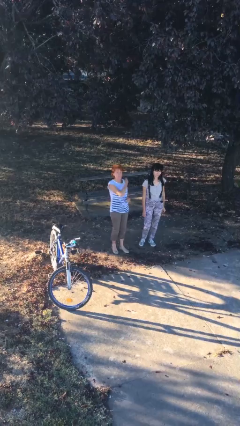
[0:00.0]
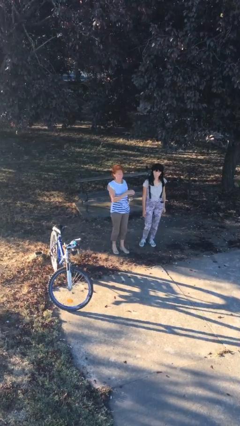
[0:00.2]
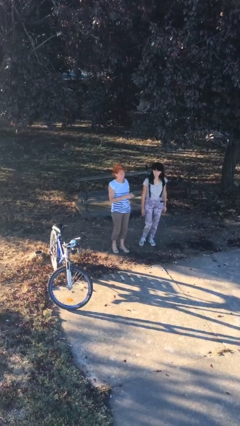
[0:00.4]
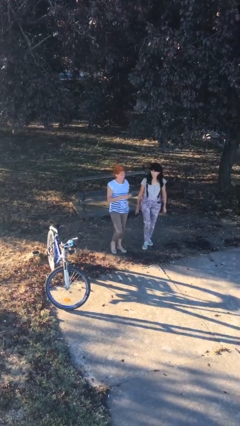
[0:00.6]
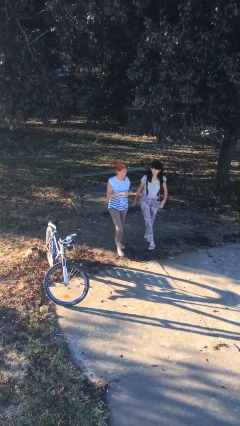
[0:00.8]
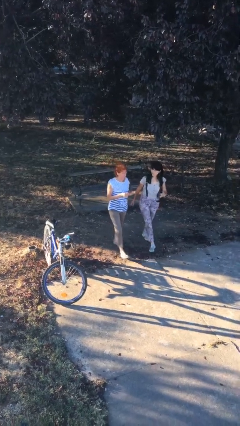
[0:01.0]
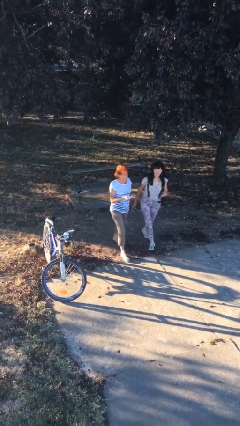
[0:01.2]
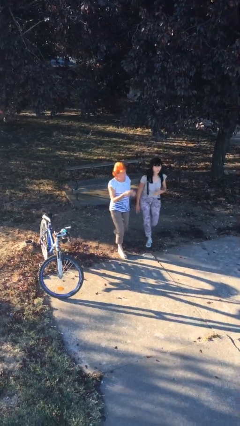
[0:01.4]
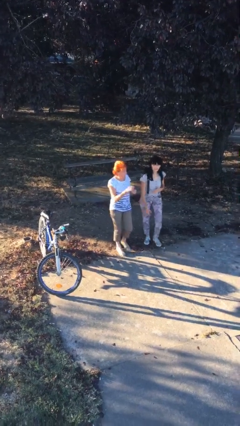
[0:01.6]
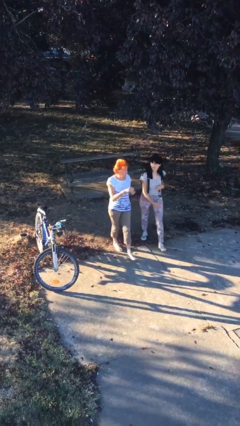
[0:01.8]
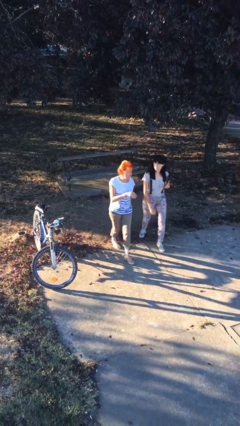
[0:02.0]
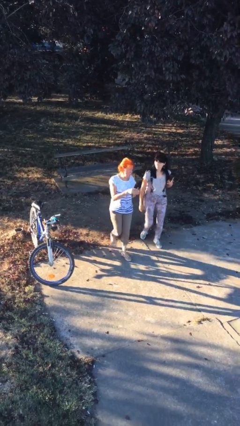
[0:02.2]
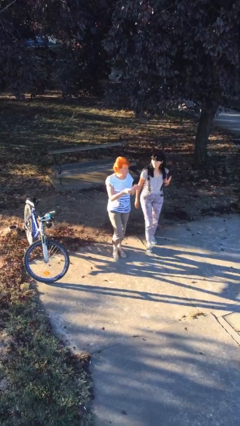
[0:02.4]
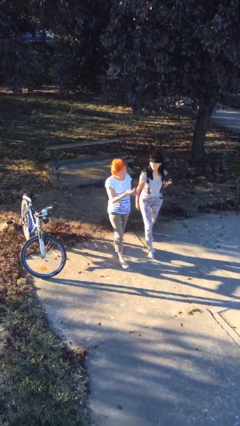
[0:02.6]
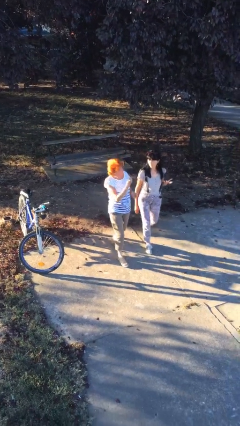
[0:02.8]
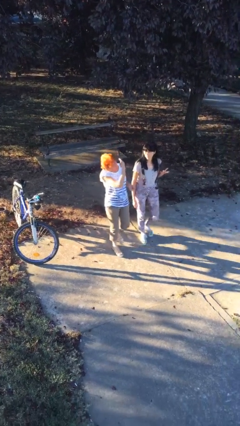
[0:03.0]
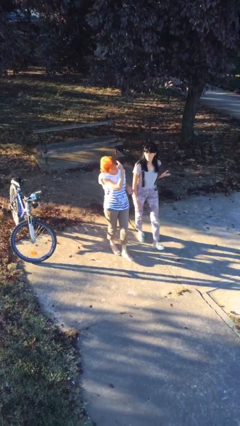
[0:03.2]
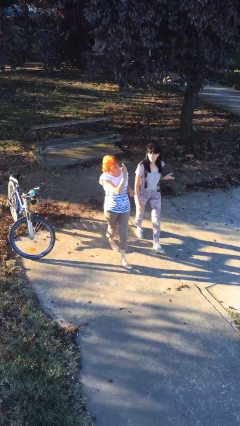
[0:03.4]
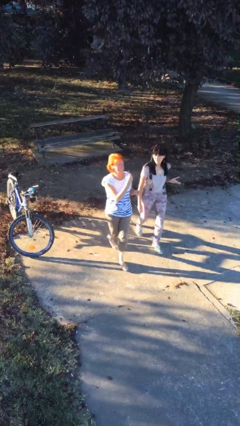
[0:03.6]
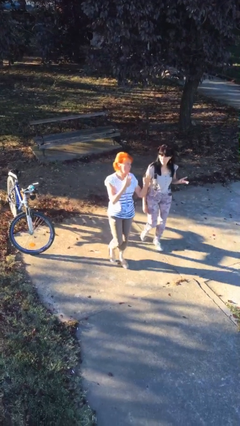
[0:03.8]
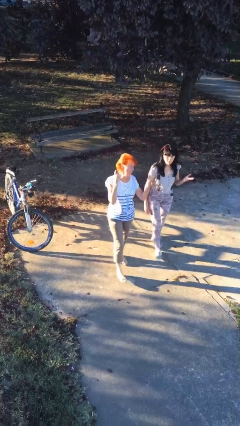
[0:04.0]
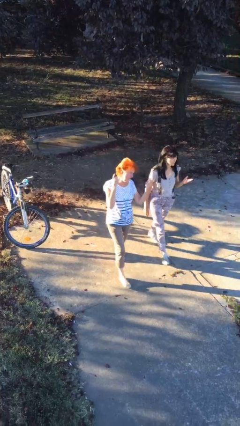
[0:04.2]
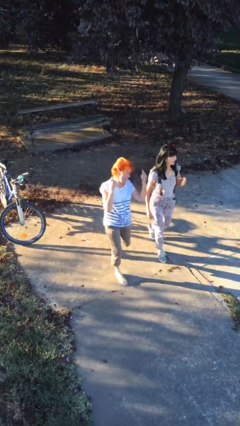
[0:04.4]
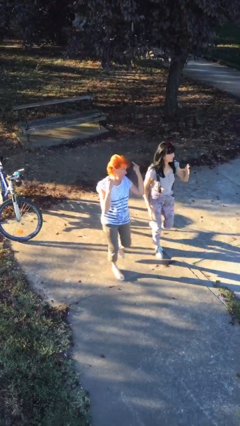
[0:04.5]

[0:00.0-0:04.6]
person talks to person

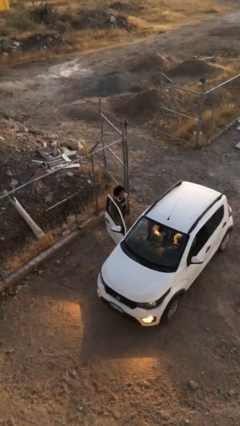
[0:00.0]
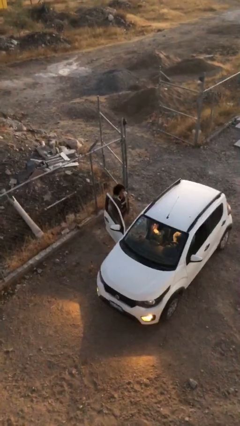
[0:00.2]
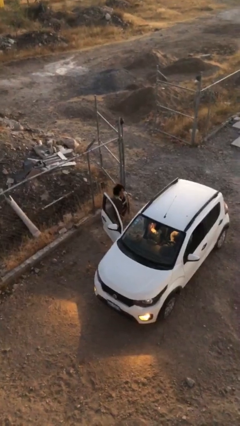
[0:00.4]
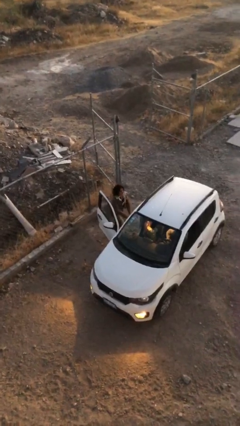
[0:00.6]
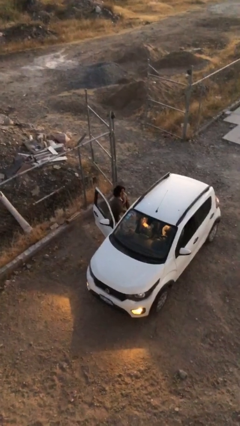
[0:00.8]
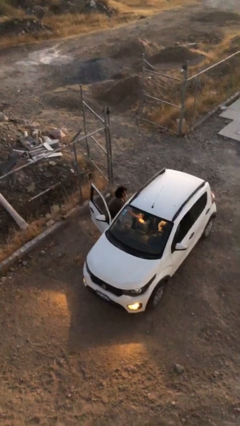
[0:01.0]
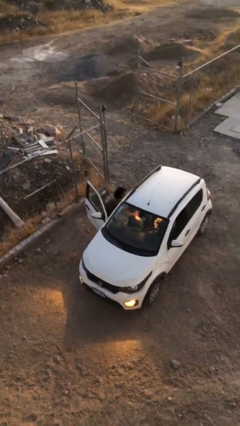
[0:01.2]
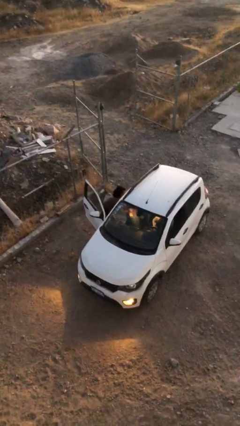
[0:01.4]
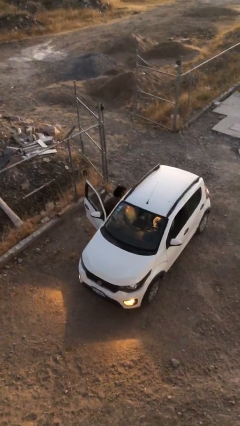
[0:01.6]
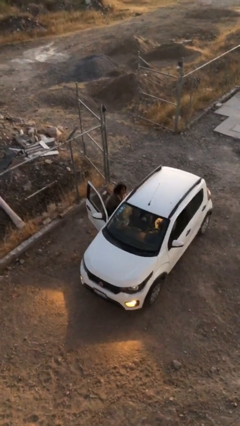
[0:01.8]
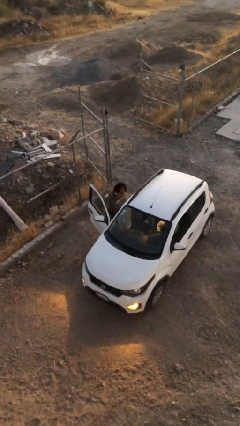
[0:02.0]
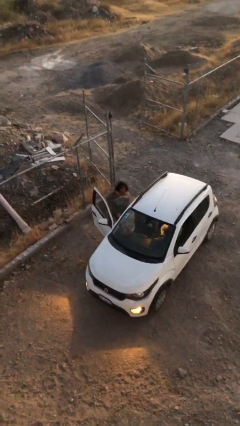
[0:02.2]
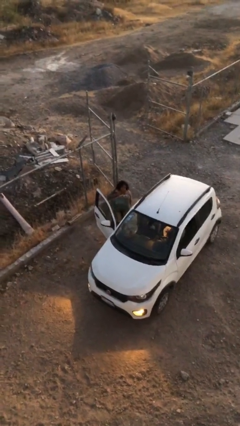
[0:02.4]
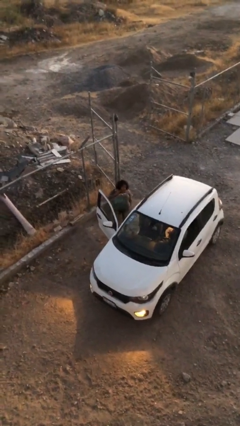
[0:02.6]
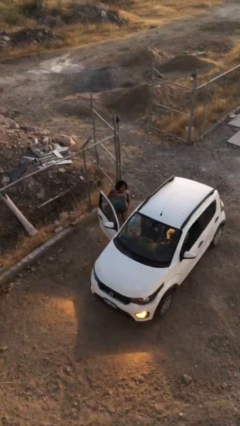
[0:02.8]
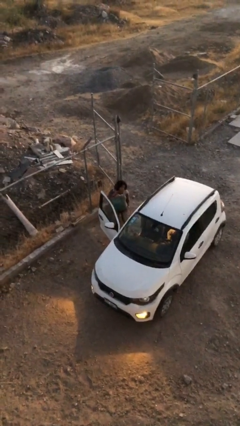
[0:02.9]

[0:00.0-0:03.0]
person unloads car

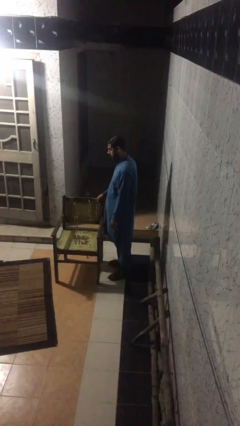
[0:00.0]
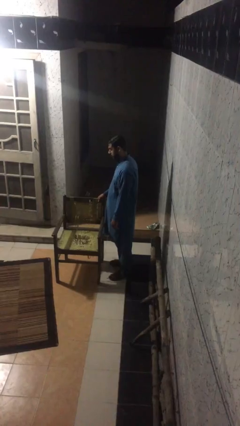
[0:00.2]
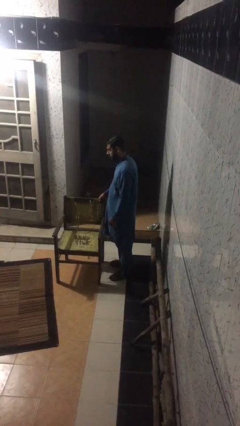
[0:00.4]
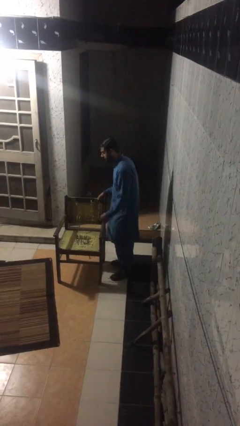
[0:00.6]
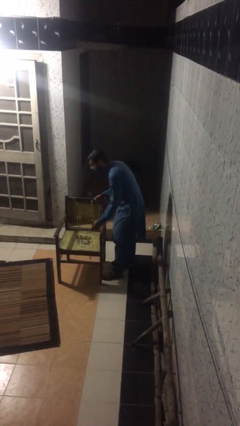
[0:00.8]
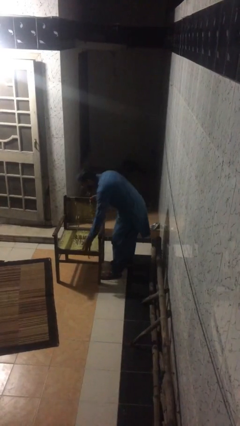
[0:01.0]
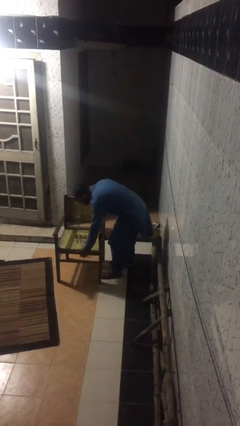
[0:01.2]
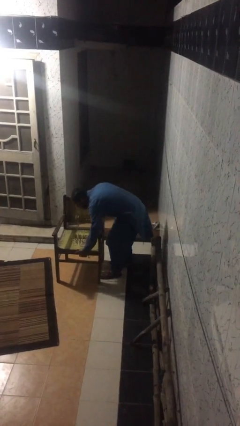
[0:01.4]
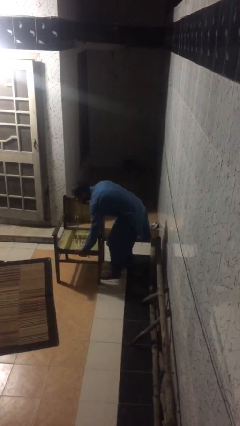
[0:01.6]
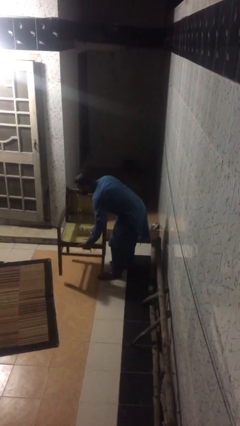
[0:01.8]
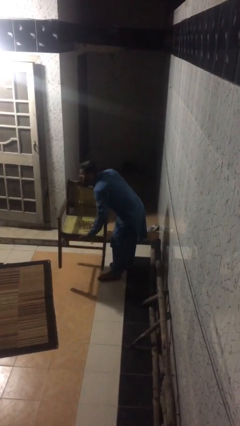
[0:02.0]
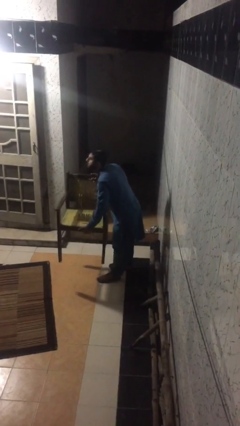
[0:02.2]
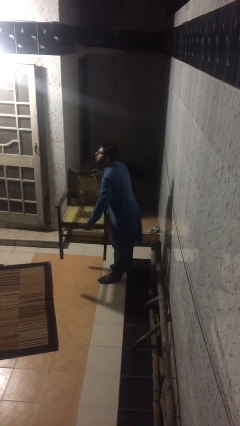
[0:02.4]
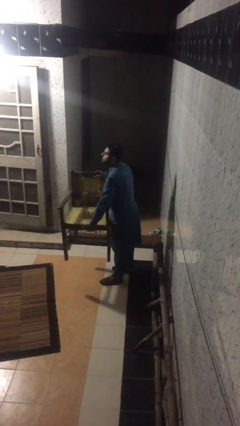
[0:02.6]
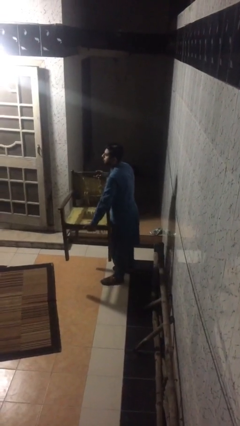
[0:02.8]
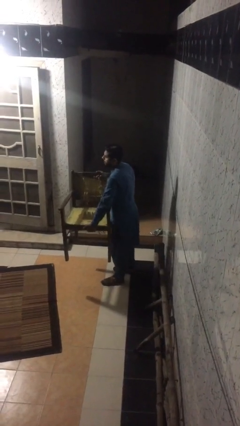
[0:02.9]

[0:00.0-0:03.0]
person picks up object from floor

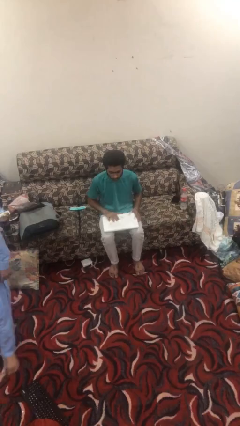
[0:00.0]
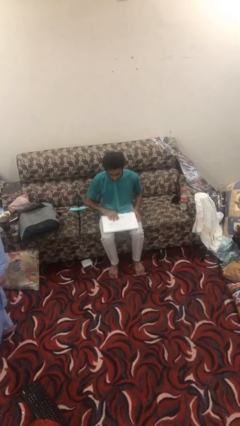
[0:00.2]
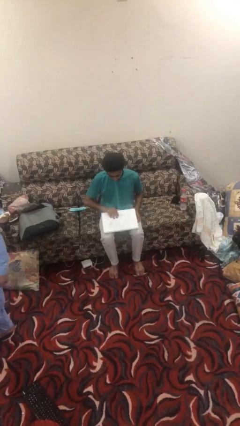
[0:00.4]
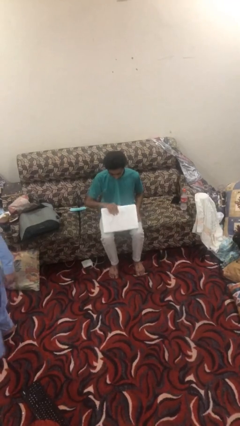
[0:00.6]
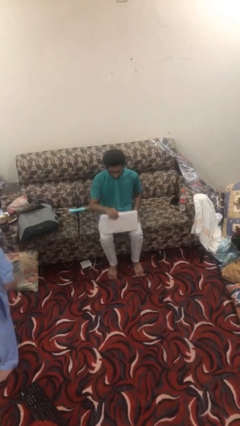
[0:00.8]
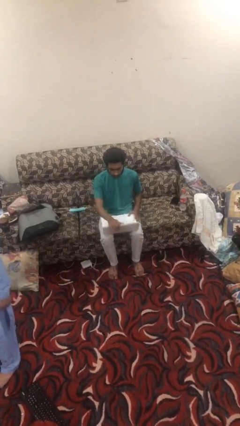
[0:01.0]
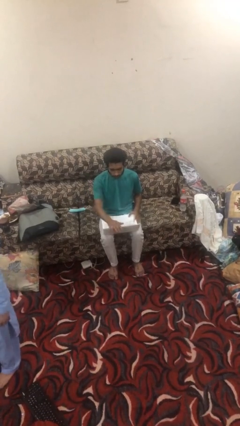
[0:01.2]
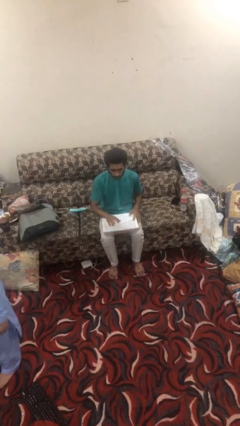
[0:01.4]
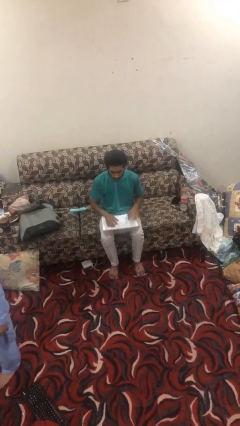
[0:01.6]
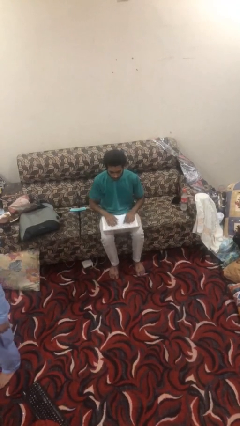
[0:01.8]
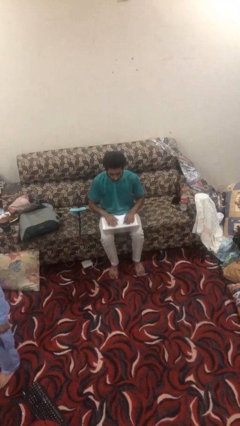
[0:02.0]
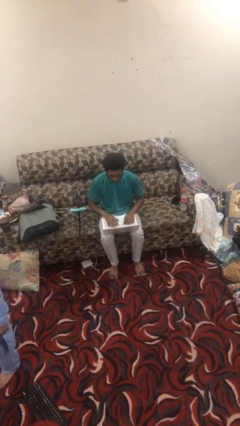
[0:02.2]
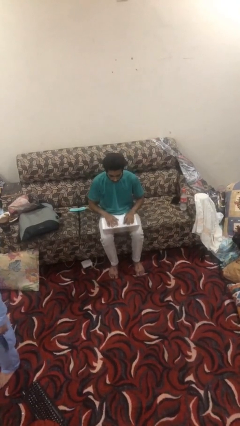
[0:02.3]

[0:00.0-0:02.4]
person opens laptop

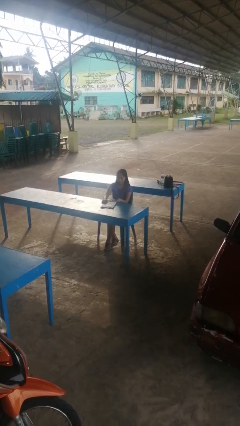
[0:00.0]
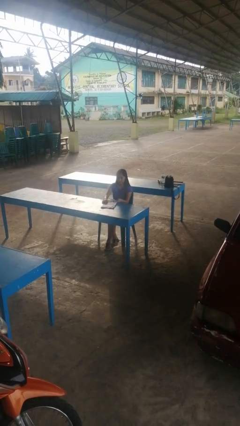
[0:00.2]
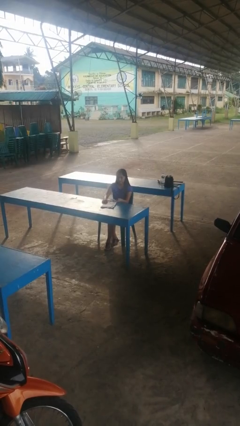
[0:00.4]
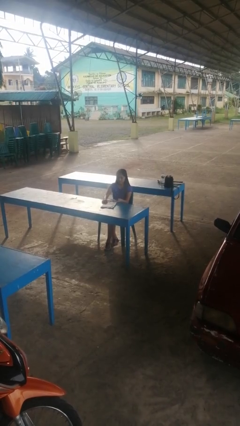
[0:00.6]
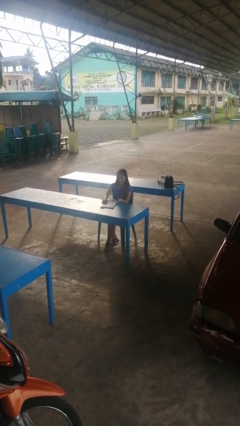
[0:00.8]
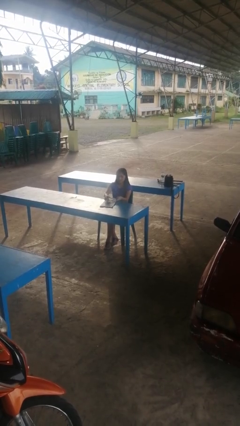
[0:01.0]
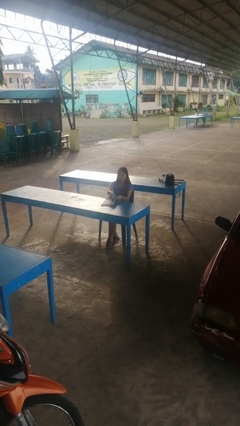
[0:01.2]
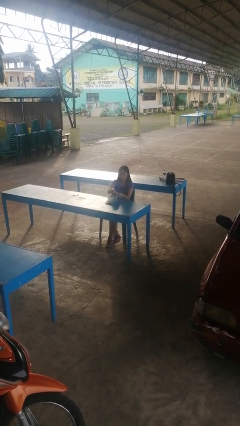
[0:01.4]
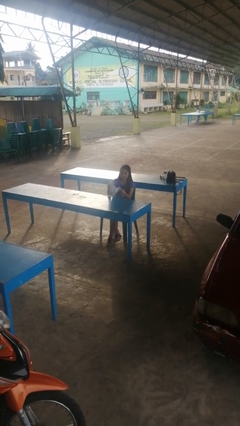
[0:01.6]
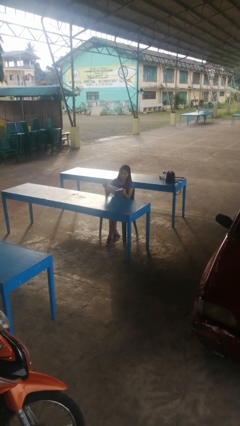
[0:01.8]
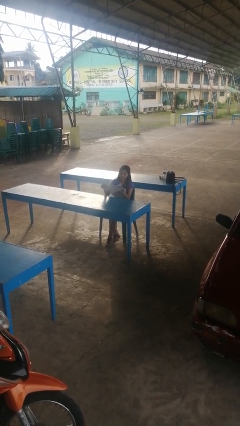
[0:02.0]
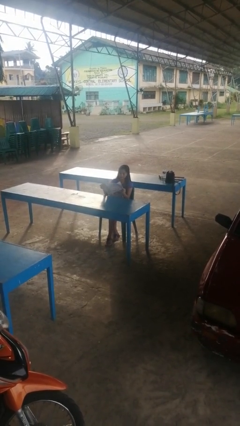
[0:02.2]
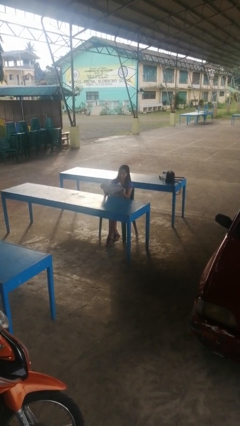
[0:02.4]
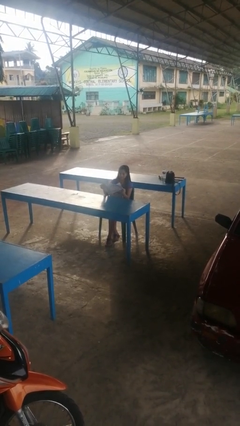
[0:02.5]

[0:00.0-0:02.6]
person reads newspaper

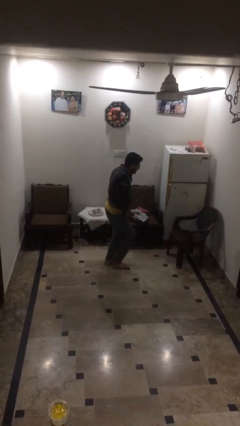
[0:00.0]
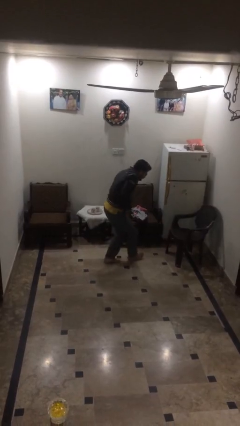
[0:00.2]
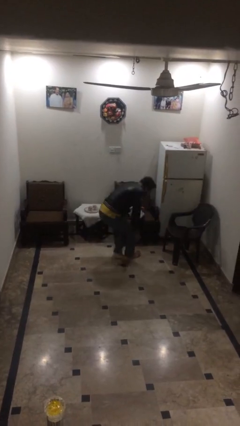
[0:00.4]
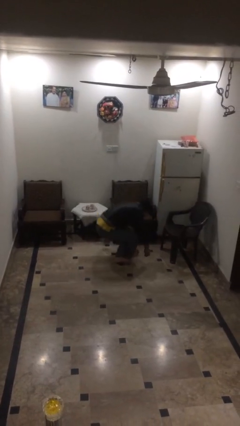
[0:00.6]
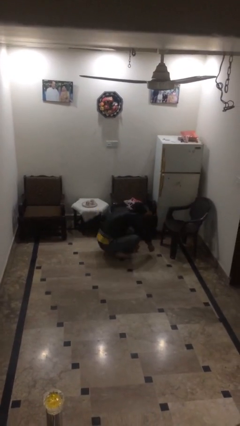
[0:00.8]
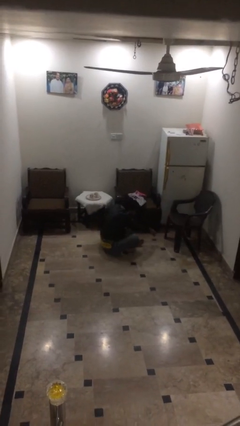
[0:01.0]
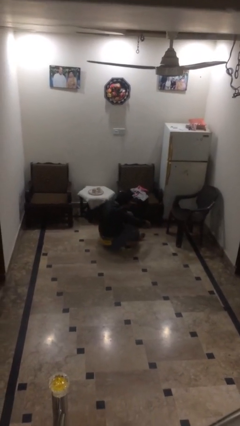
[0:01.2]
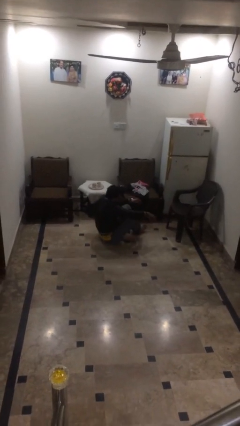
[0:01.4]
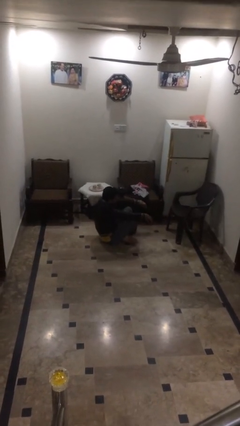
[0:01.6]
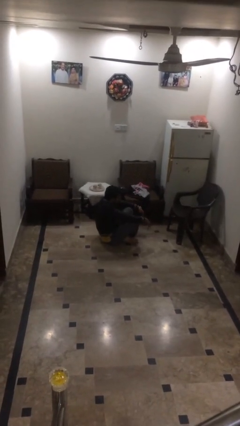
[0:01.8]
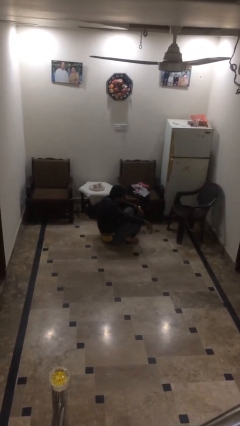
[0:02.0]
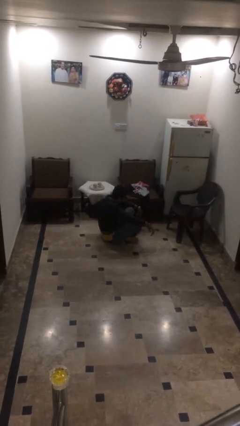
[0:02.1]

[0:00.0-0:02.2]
person sits down
